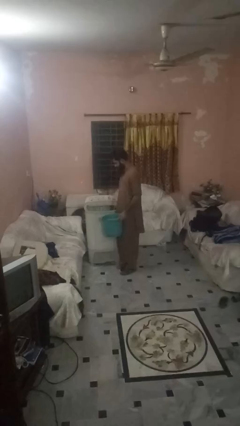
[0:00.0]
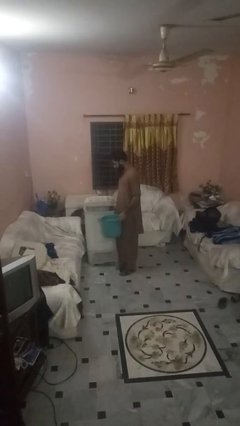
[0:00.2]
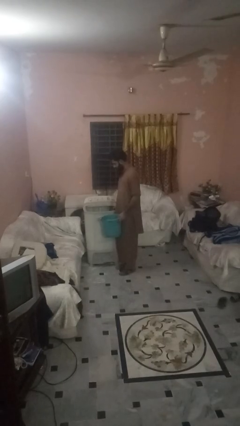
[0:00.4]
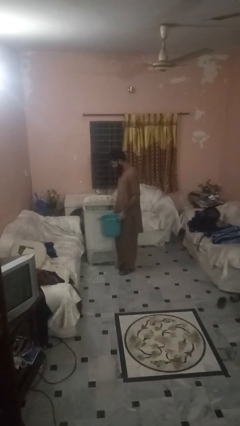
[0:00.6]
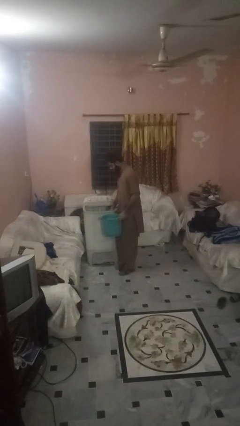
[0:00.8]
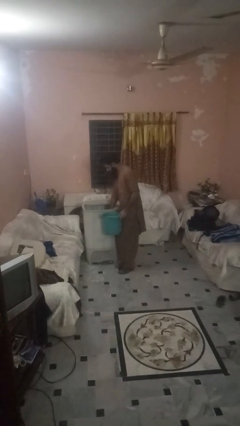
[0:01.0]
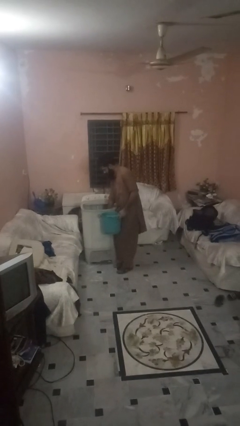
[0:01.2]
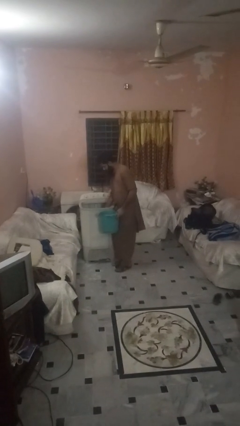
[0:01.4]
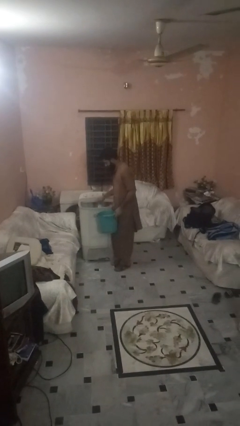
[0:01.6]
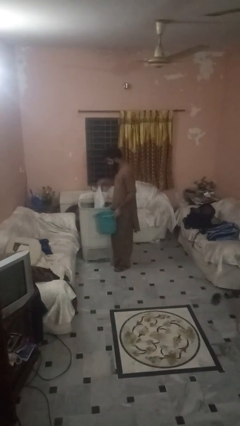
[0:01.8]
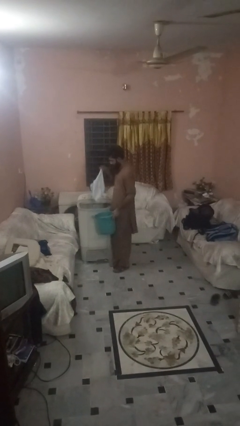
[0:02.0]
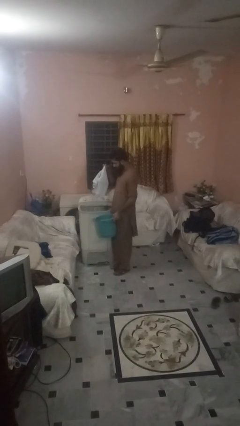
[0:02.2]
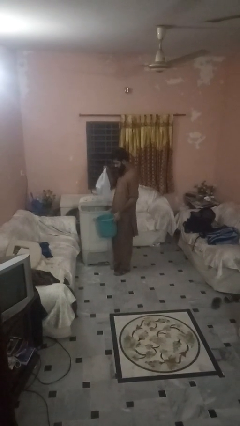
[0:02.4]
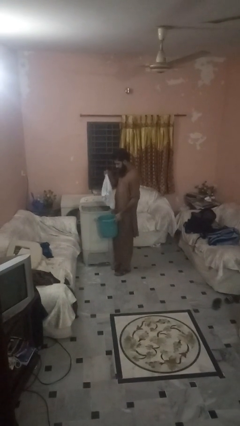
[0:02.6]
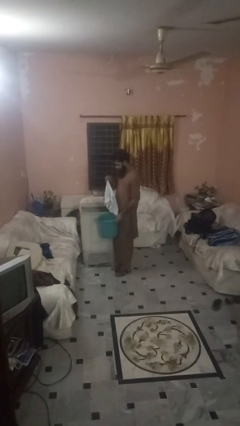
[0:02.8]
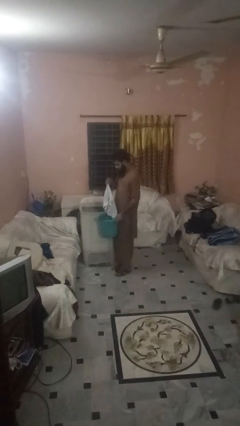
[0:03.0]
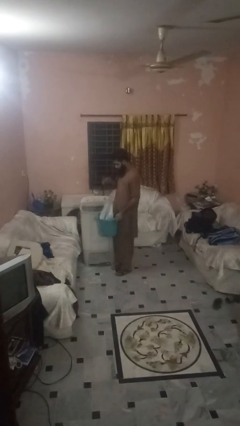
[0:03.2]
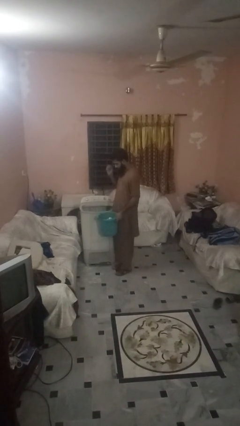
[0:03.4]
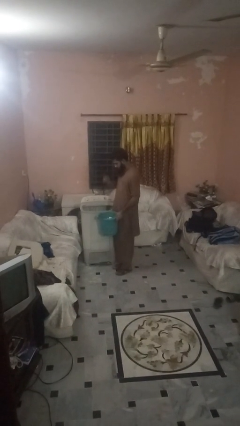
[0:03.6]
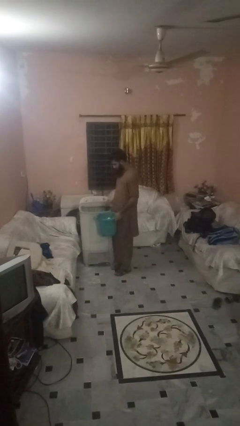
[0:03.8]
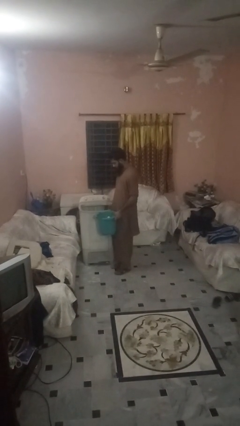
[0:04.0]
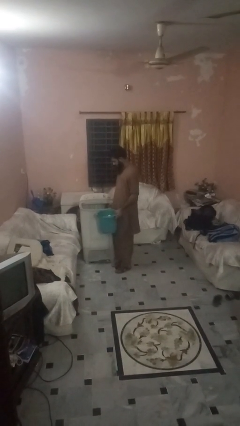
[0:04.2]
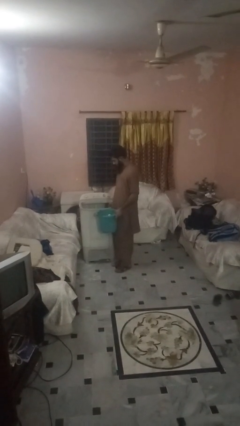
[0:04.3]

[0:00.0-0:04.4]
person unloads clotheswasher

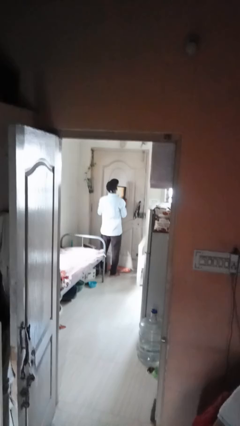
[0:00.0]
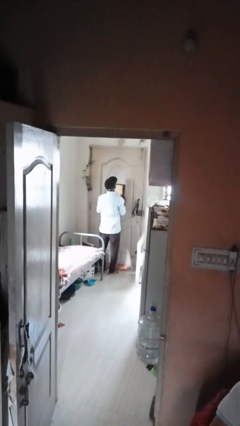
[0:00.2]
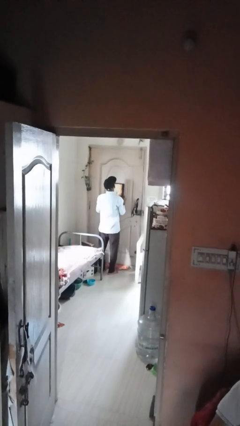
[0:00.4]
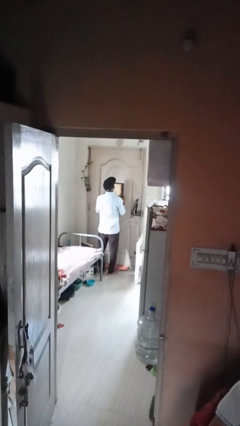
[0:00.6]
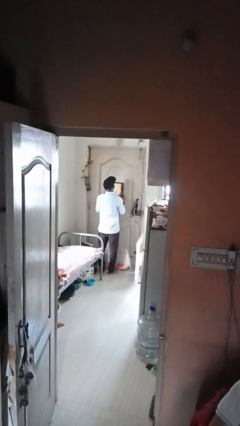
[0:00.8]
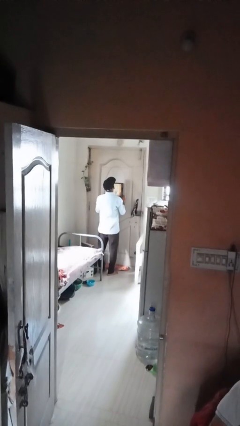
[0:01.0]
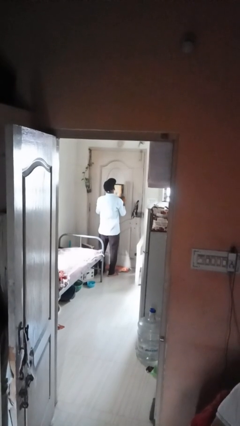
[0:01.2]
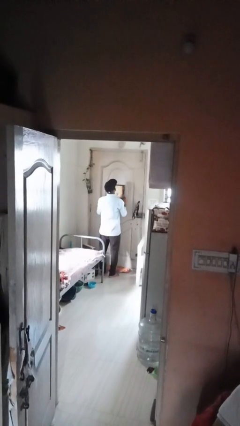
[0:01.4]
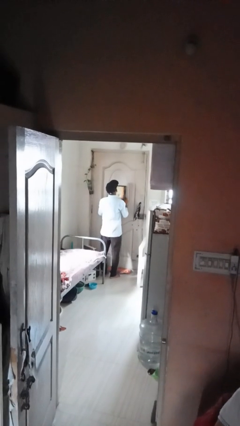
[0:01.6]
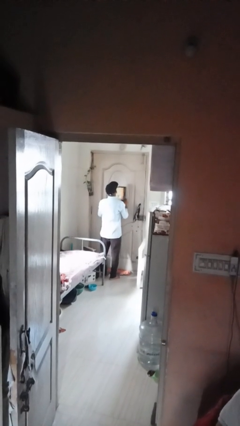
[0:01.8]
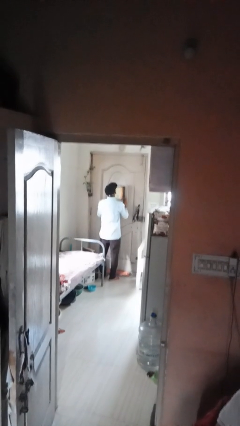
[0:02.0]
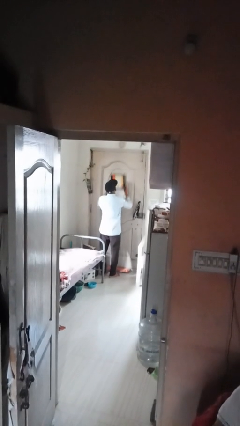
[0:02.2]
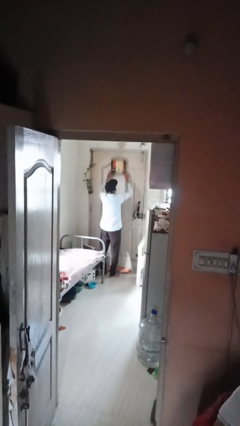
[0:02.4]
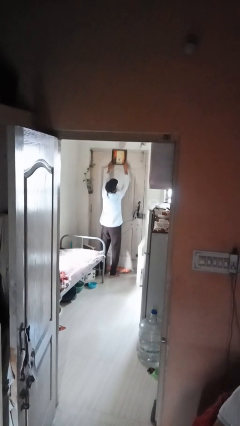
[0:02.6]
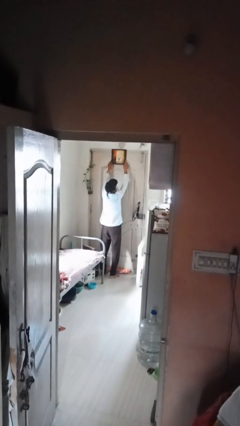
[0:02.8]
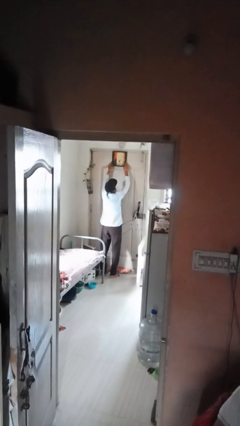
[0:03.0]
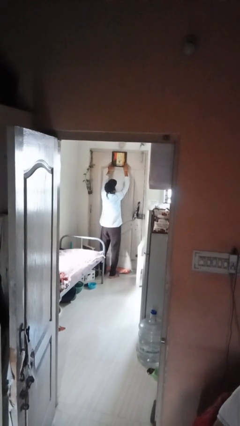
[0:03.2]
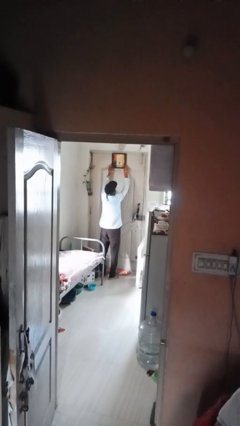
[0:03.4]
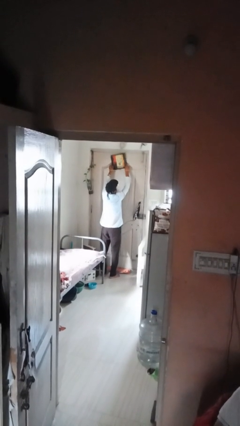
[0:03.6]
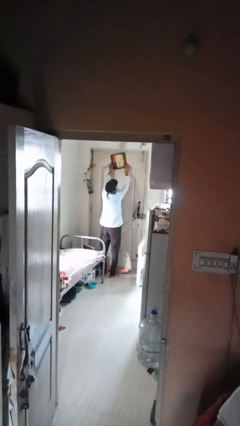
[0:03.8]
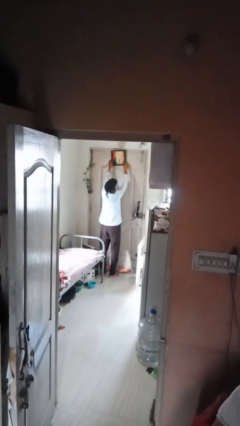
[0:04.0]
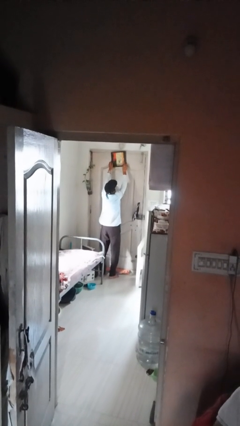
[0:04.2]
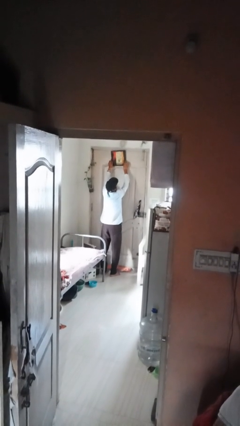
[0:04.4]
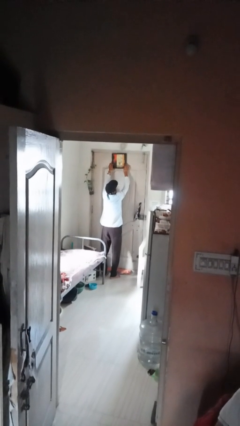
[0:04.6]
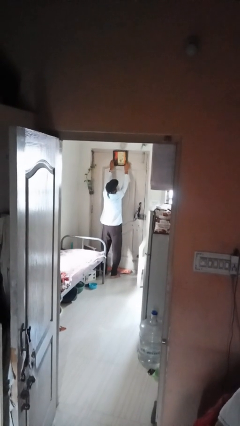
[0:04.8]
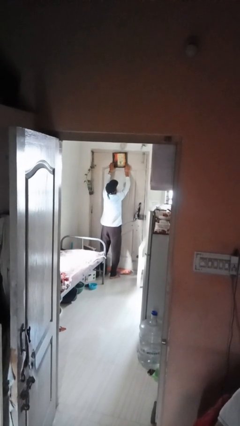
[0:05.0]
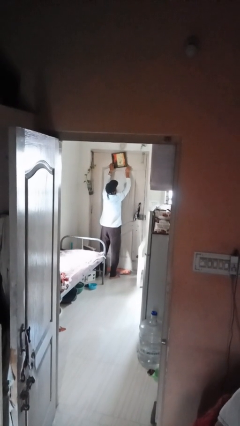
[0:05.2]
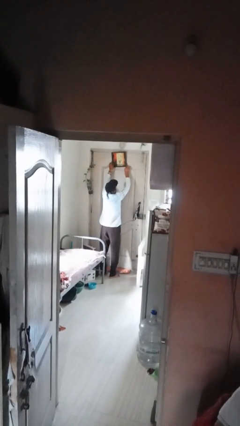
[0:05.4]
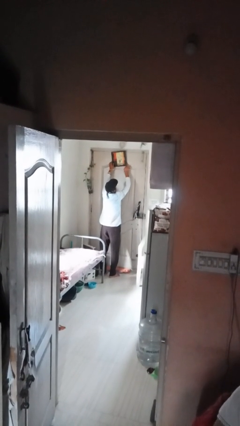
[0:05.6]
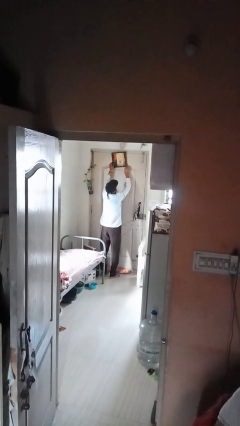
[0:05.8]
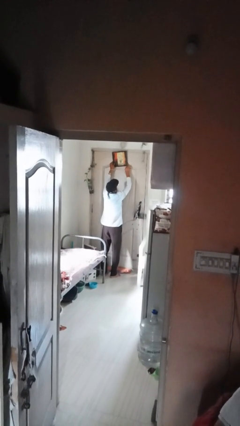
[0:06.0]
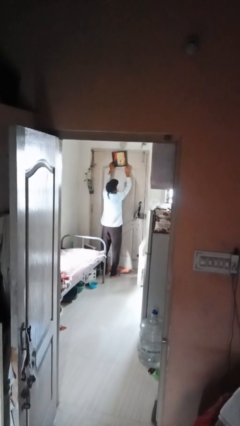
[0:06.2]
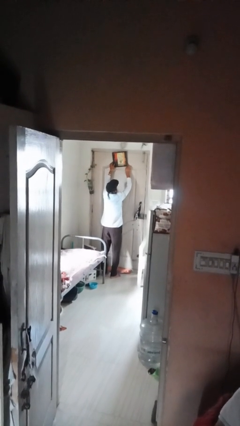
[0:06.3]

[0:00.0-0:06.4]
person puts up picture frame

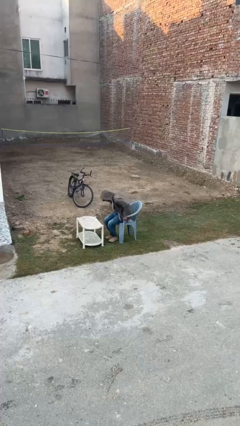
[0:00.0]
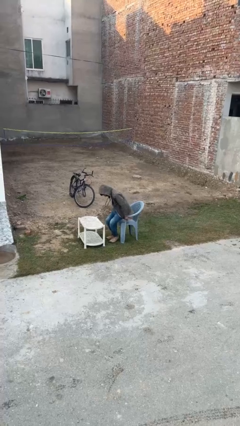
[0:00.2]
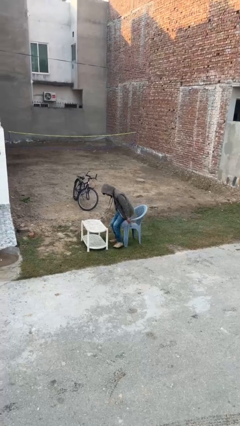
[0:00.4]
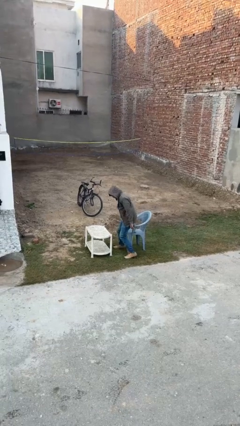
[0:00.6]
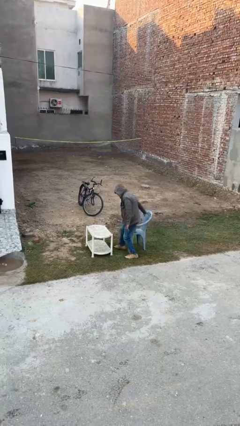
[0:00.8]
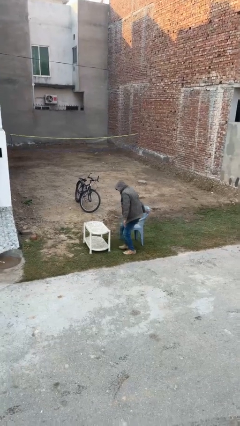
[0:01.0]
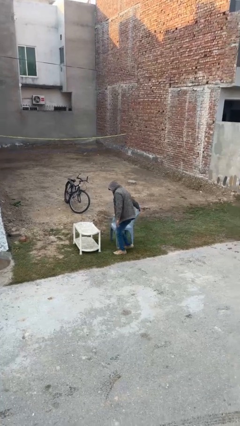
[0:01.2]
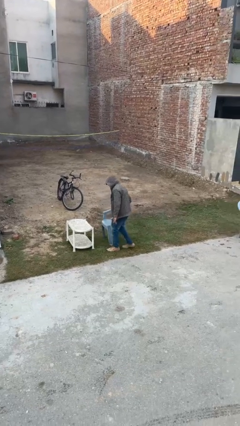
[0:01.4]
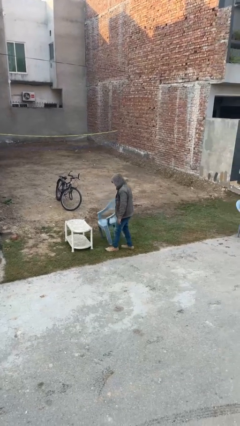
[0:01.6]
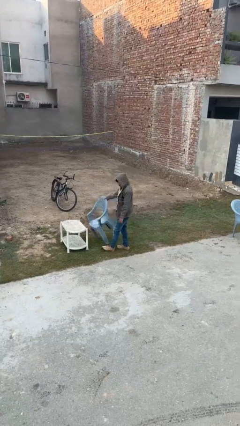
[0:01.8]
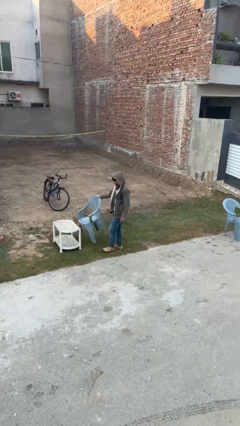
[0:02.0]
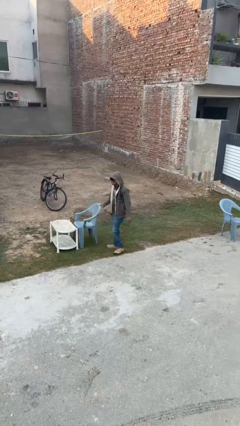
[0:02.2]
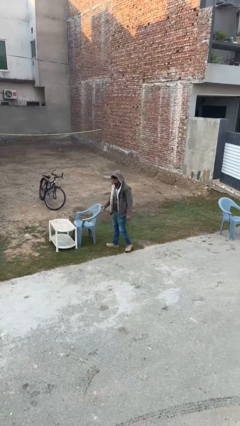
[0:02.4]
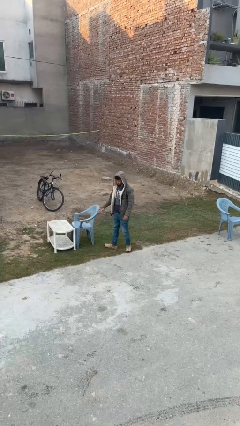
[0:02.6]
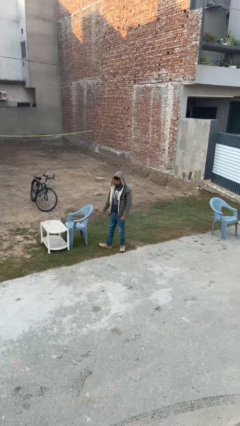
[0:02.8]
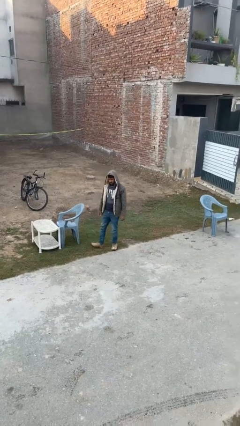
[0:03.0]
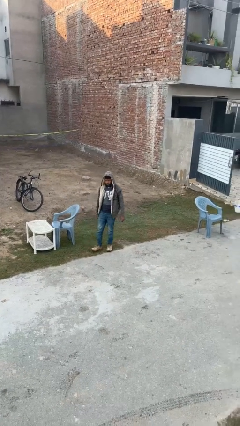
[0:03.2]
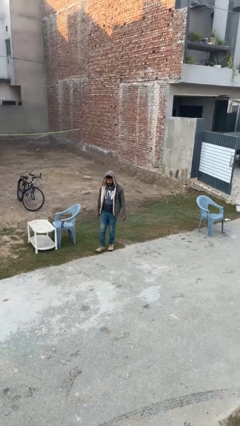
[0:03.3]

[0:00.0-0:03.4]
person stands up

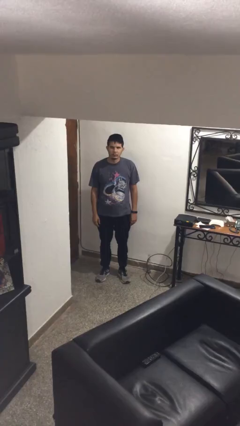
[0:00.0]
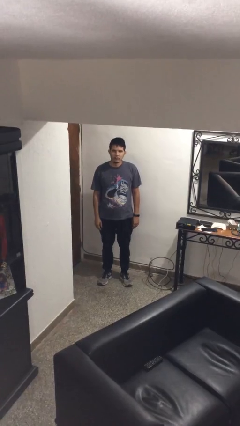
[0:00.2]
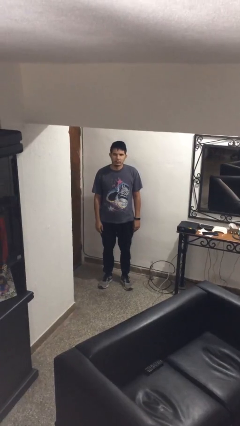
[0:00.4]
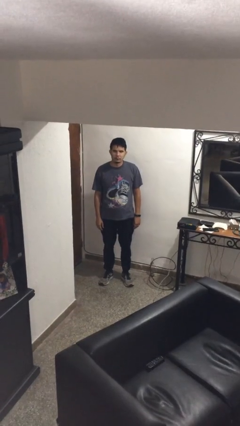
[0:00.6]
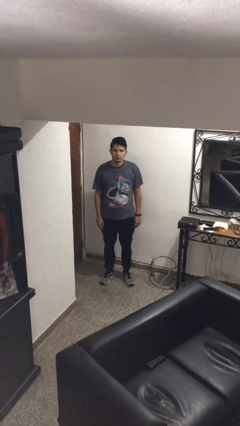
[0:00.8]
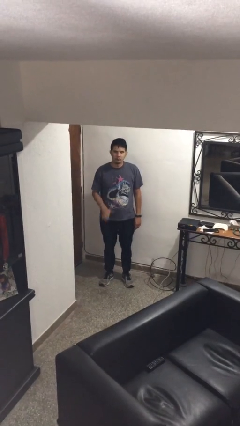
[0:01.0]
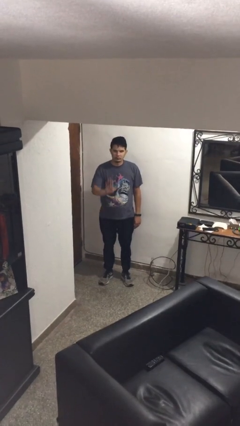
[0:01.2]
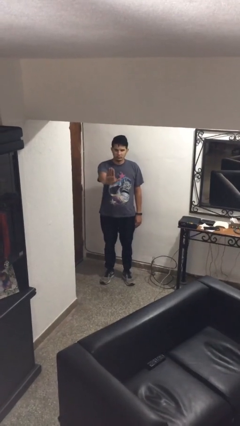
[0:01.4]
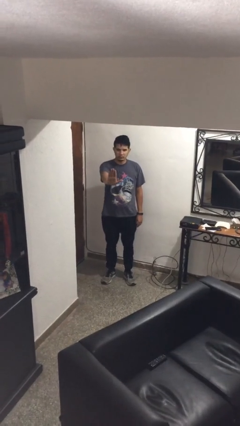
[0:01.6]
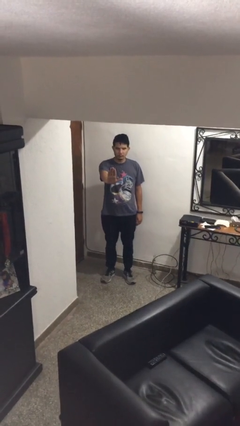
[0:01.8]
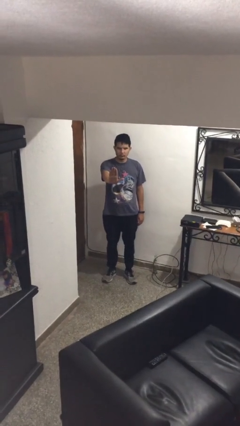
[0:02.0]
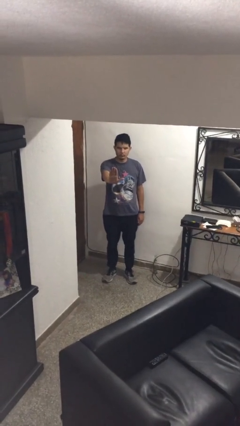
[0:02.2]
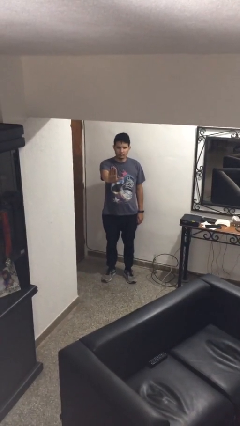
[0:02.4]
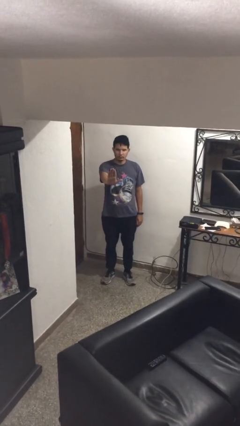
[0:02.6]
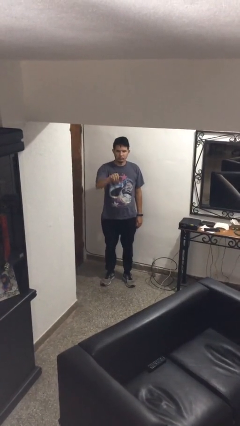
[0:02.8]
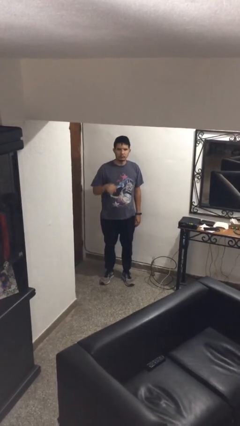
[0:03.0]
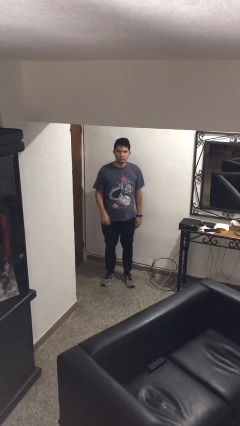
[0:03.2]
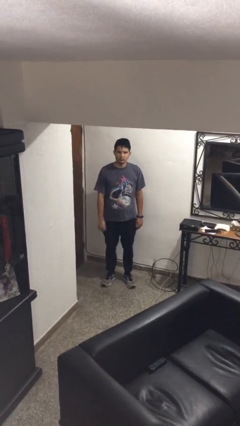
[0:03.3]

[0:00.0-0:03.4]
person gestures stop
